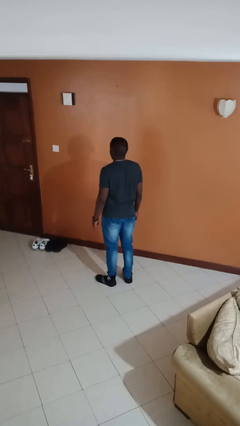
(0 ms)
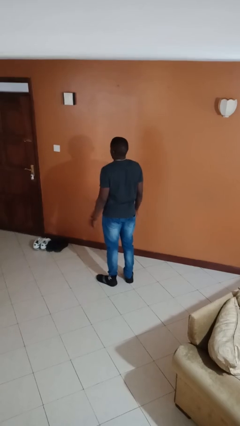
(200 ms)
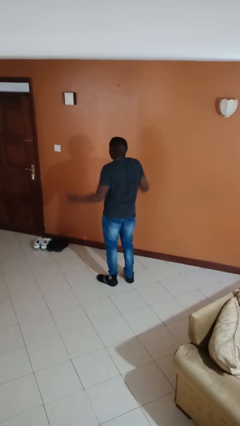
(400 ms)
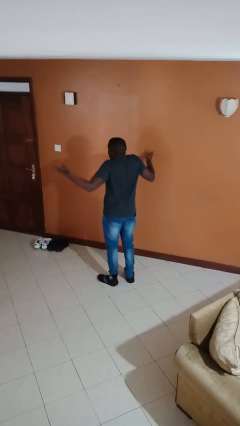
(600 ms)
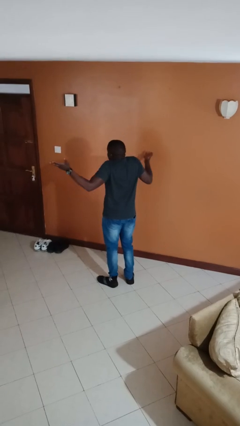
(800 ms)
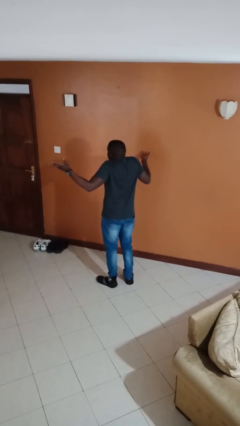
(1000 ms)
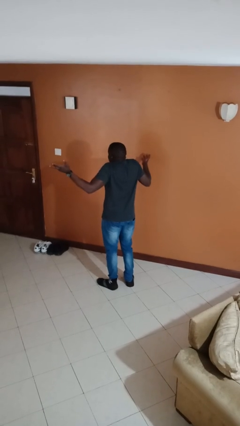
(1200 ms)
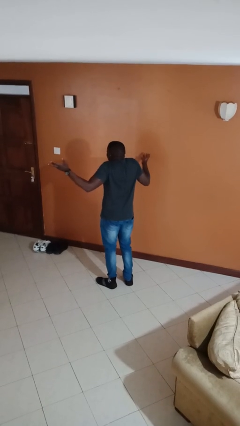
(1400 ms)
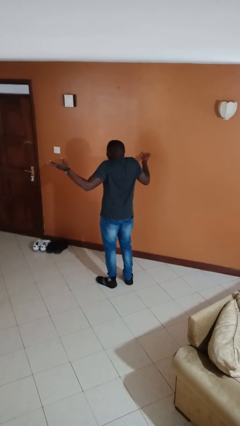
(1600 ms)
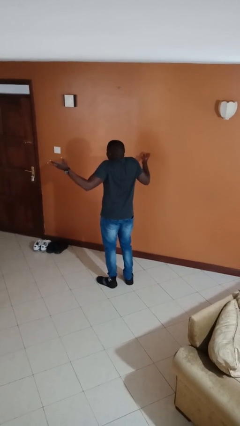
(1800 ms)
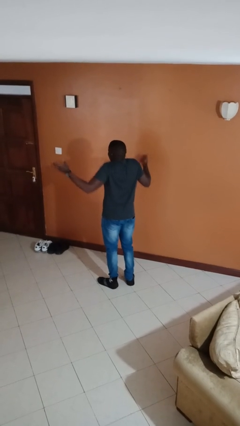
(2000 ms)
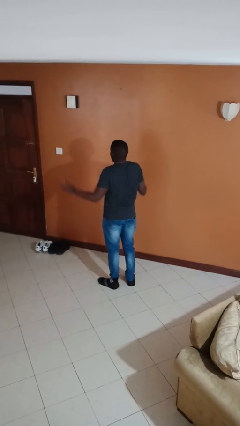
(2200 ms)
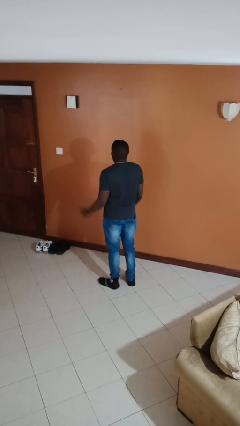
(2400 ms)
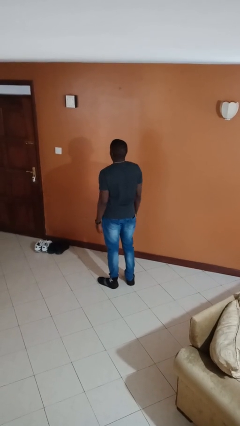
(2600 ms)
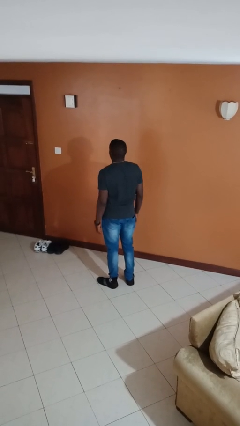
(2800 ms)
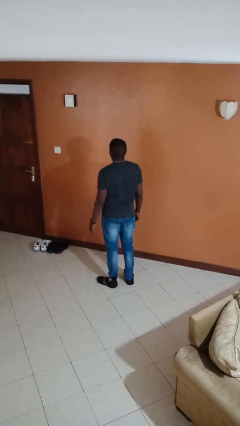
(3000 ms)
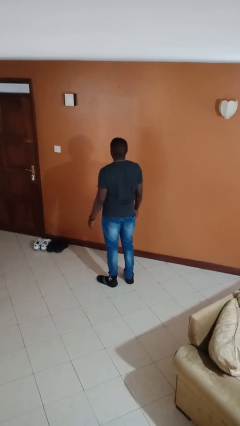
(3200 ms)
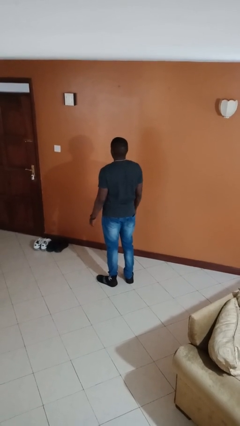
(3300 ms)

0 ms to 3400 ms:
person shrugs

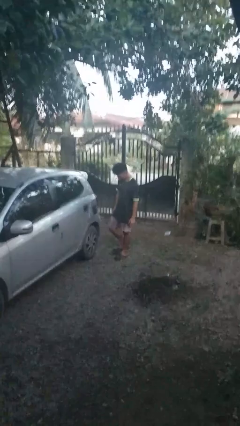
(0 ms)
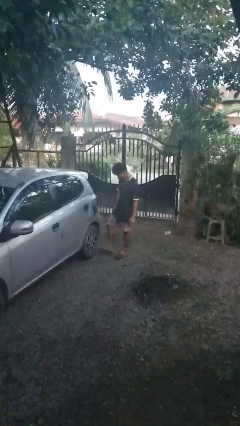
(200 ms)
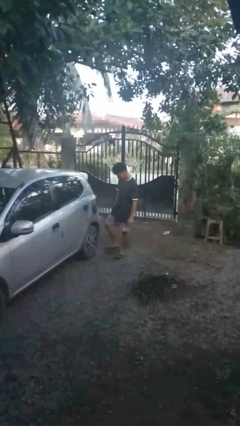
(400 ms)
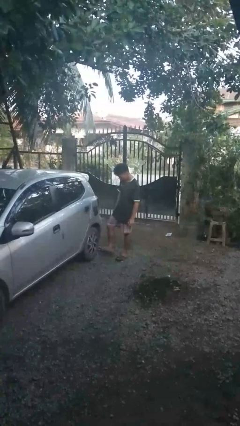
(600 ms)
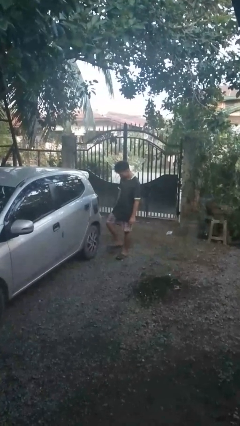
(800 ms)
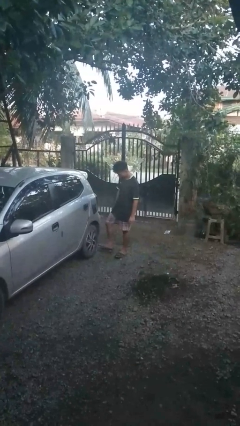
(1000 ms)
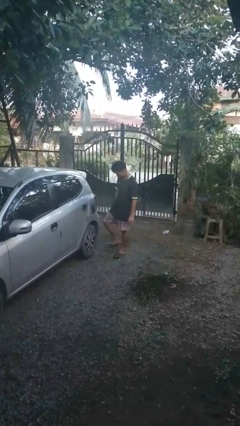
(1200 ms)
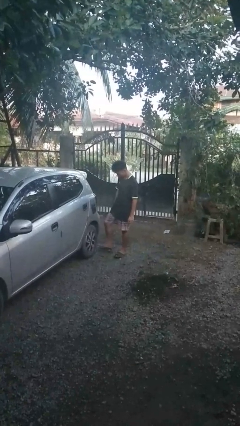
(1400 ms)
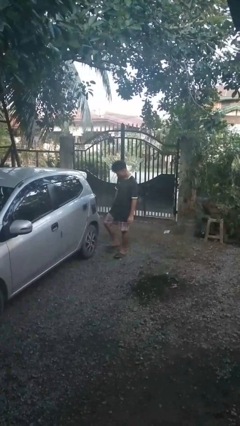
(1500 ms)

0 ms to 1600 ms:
person kicks car tires

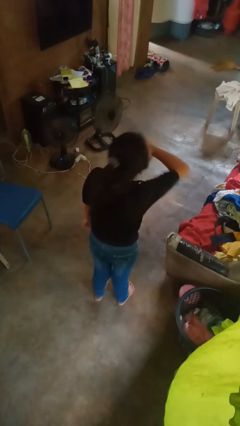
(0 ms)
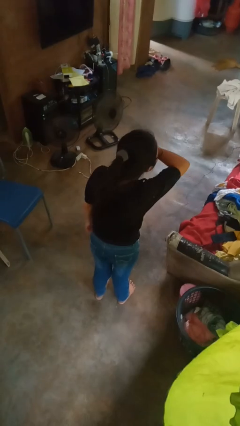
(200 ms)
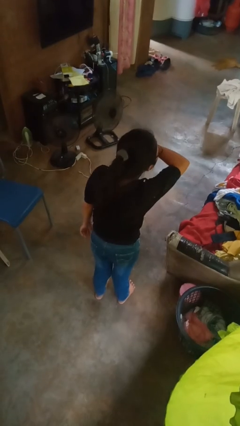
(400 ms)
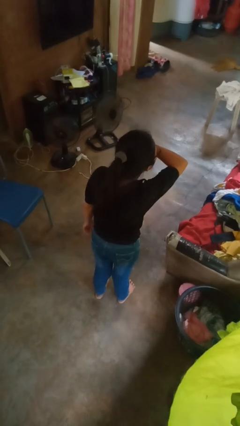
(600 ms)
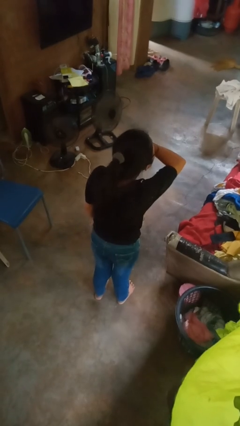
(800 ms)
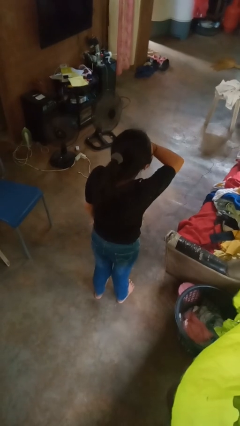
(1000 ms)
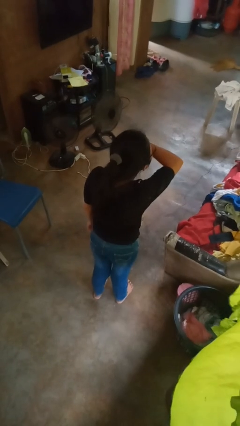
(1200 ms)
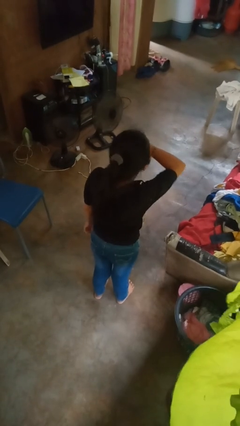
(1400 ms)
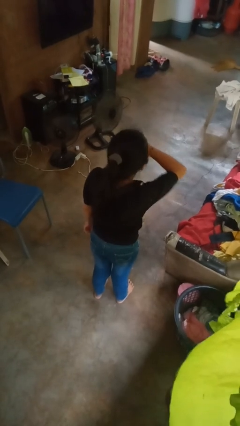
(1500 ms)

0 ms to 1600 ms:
person sneezes into arm

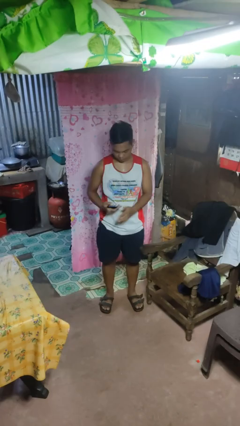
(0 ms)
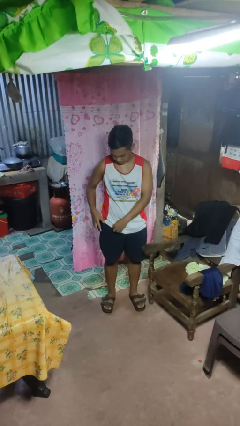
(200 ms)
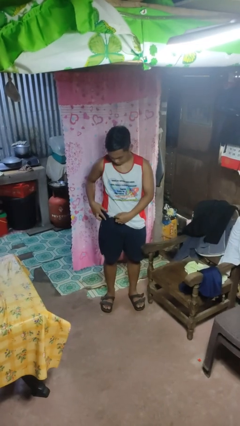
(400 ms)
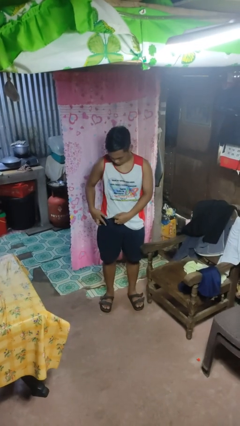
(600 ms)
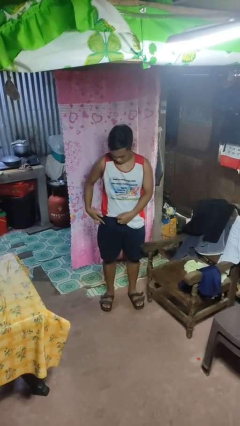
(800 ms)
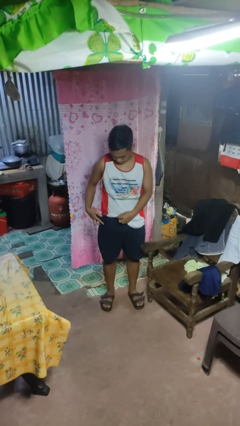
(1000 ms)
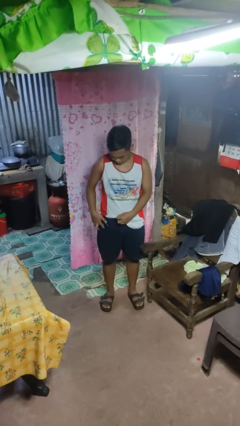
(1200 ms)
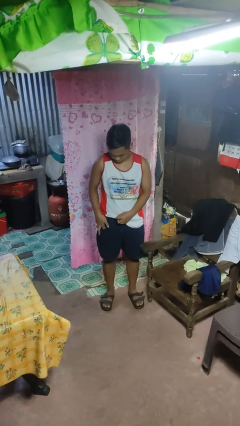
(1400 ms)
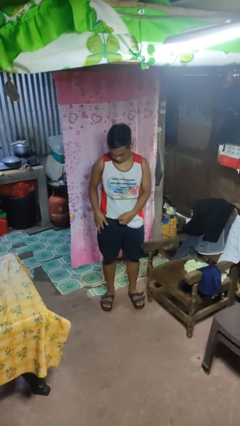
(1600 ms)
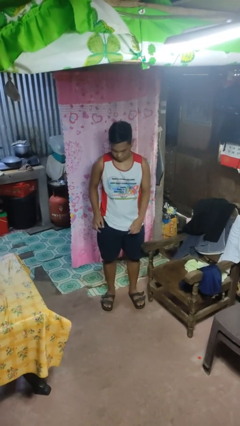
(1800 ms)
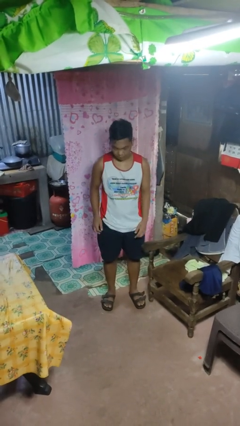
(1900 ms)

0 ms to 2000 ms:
person puts phone into pocket

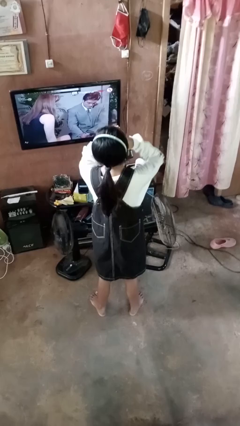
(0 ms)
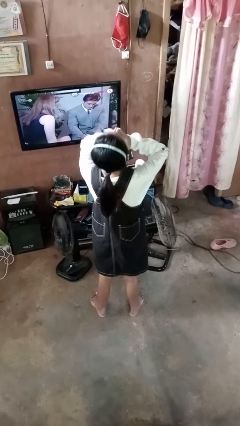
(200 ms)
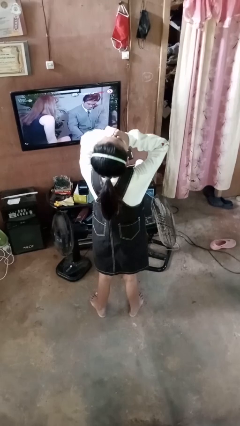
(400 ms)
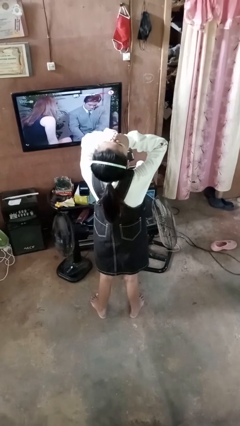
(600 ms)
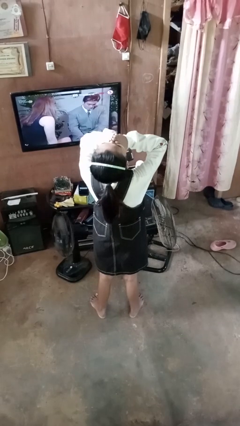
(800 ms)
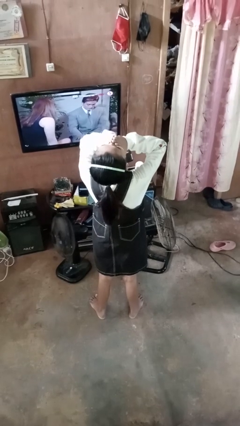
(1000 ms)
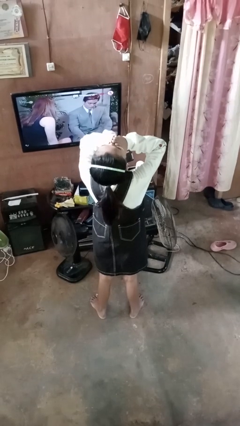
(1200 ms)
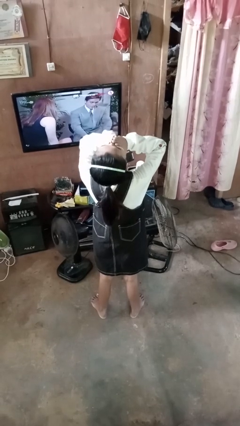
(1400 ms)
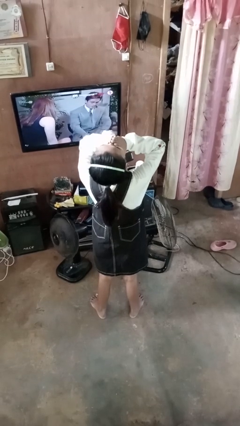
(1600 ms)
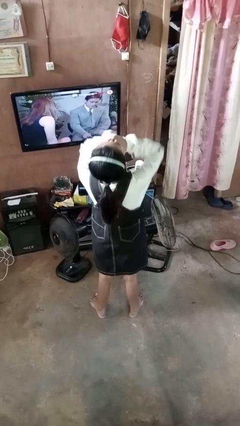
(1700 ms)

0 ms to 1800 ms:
person yawns

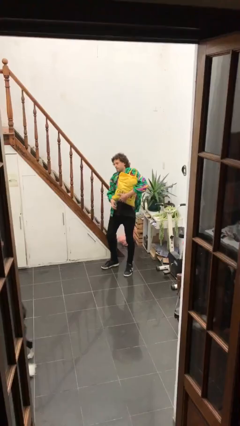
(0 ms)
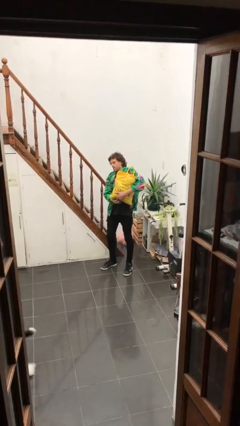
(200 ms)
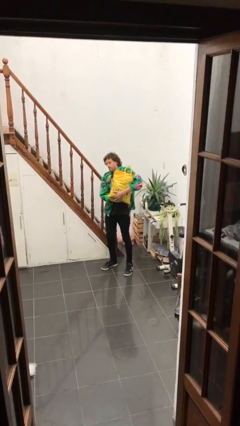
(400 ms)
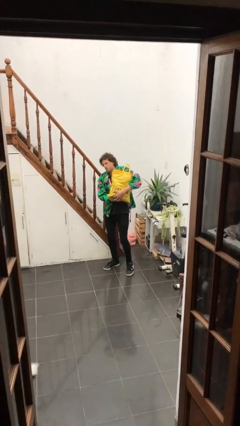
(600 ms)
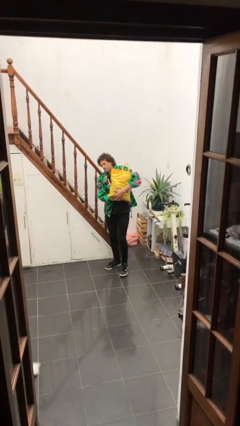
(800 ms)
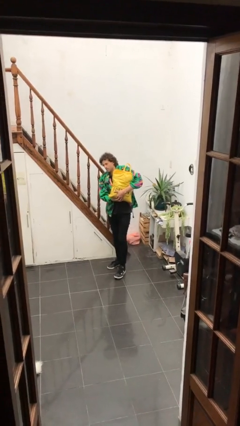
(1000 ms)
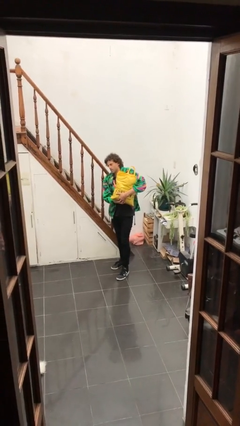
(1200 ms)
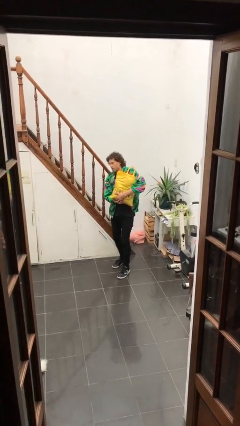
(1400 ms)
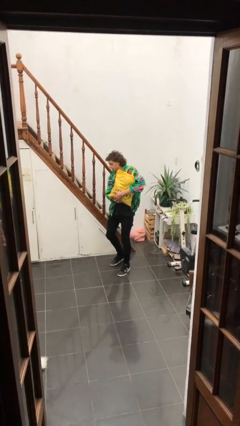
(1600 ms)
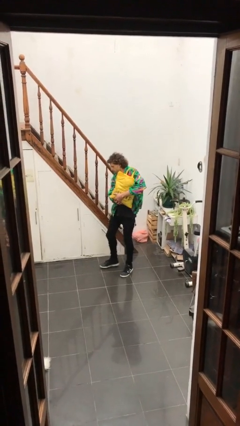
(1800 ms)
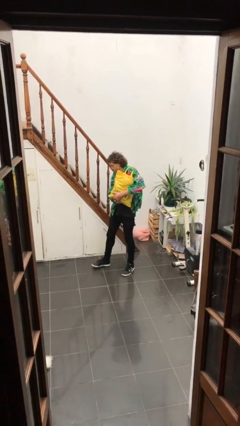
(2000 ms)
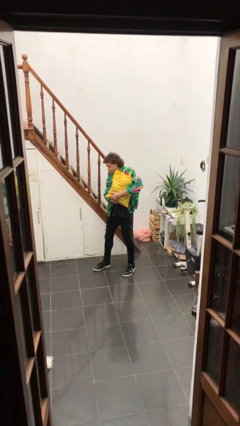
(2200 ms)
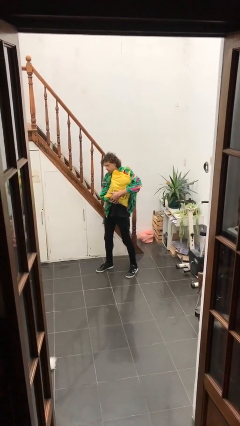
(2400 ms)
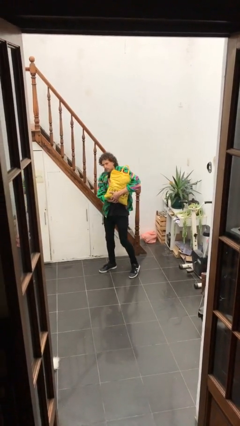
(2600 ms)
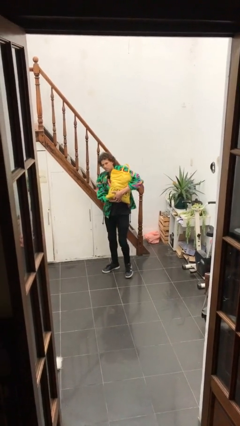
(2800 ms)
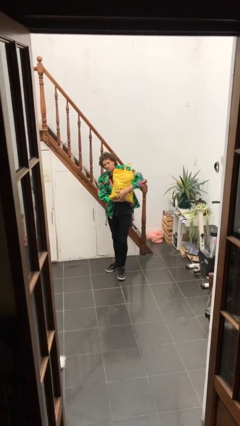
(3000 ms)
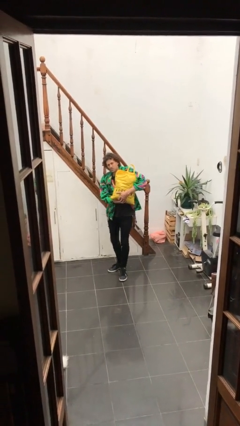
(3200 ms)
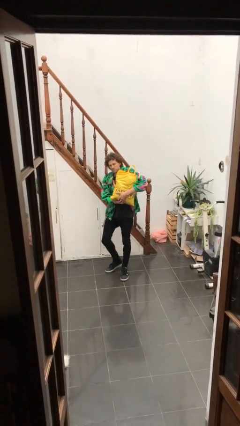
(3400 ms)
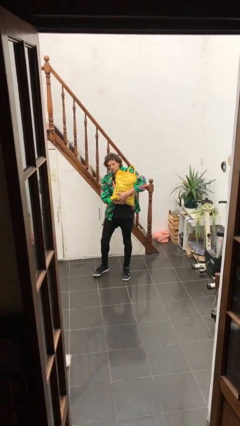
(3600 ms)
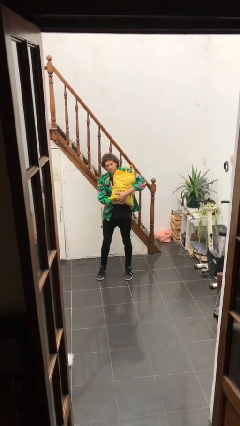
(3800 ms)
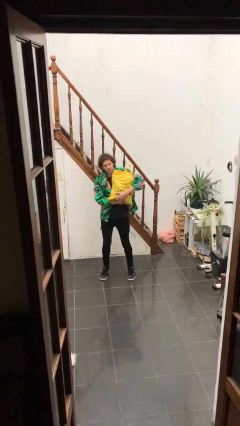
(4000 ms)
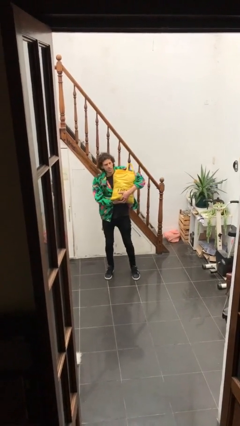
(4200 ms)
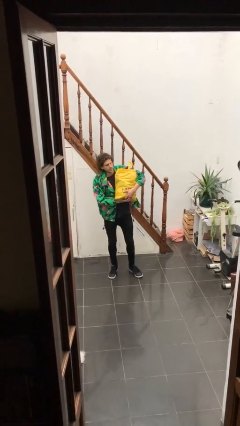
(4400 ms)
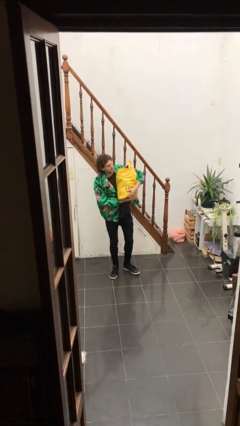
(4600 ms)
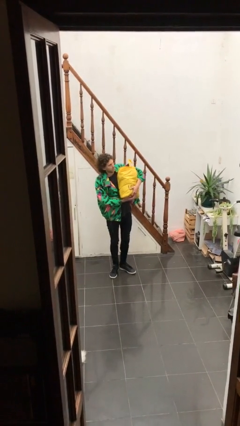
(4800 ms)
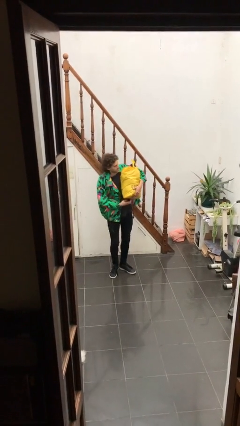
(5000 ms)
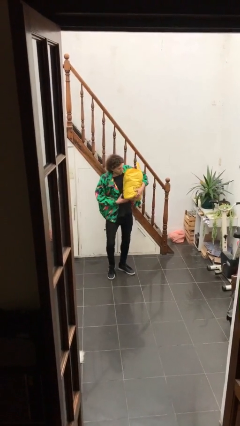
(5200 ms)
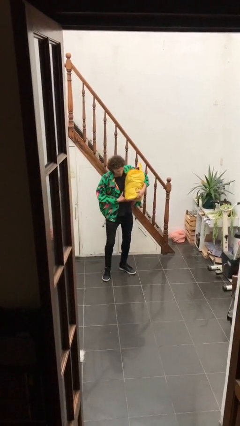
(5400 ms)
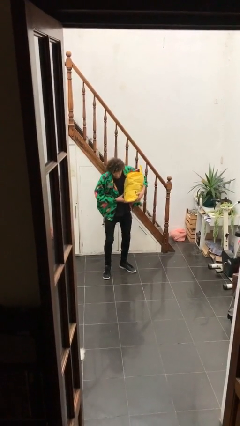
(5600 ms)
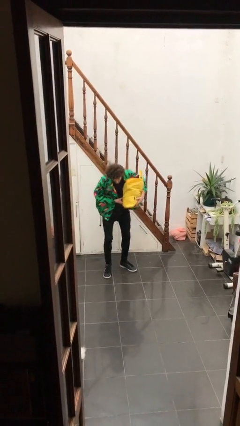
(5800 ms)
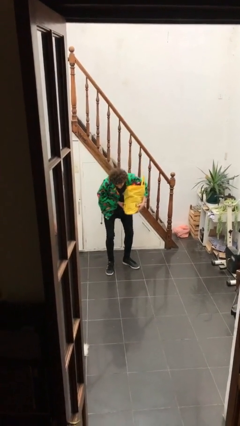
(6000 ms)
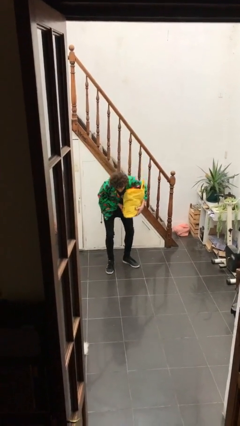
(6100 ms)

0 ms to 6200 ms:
person carries heavy object

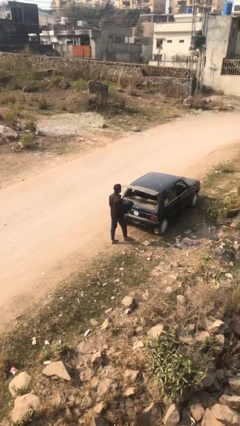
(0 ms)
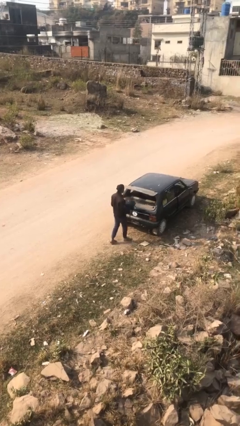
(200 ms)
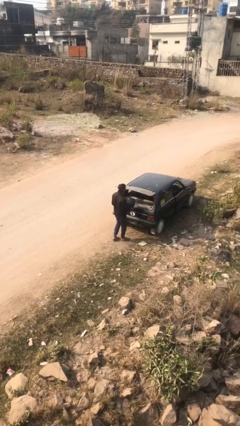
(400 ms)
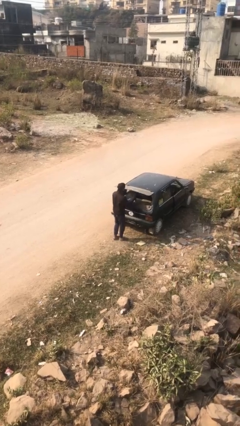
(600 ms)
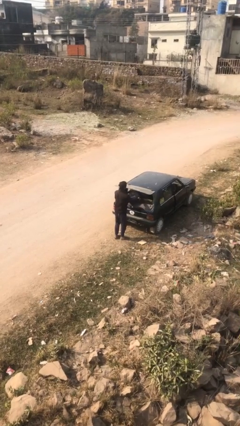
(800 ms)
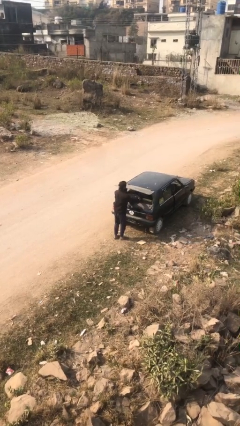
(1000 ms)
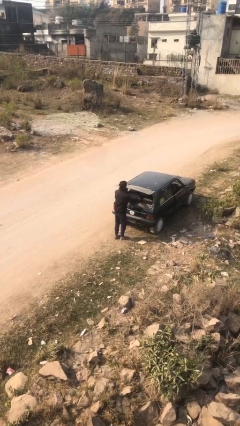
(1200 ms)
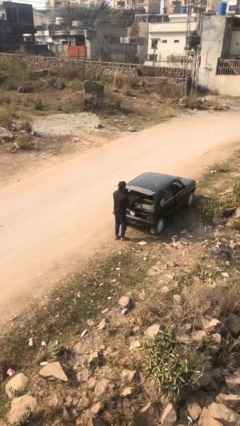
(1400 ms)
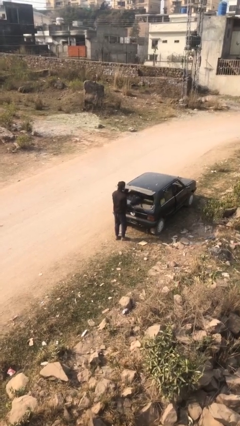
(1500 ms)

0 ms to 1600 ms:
person loads car
